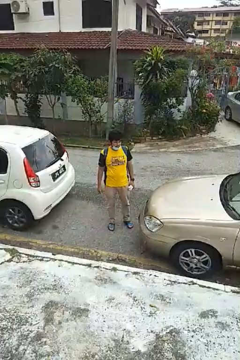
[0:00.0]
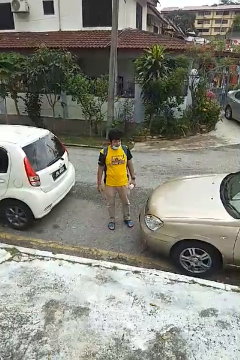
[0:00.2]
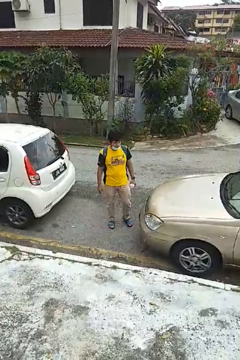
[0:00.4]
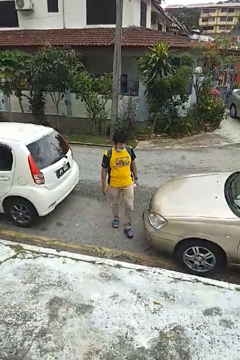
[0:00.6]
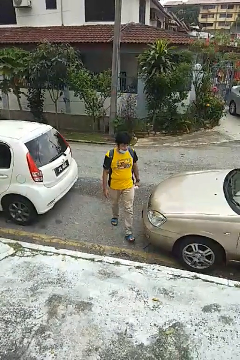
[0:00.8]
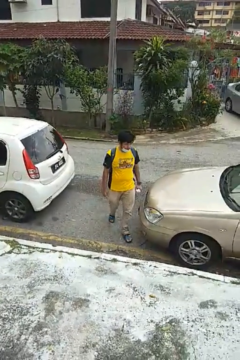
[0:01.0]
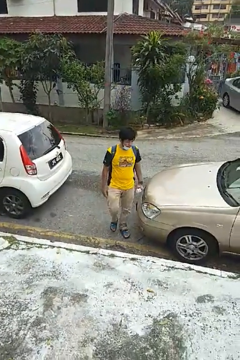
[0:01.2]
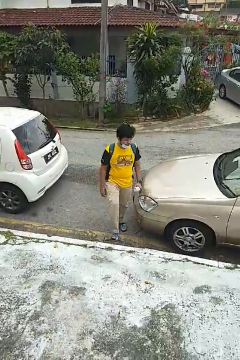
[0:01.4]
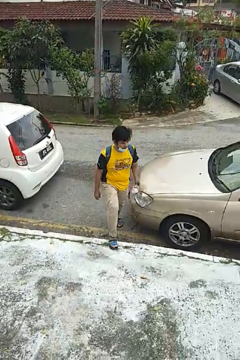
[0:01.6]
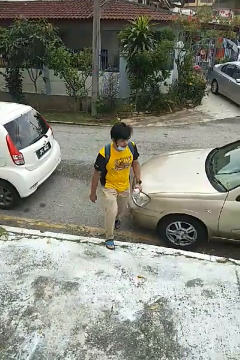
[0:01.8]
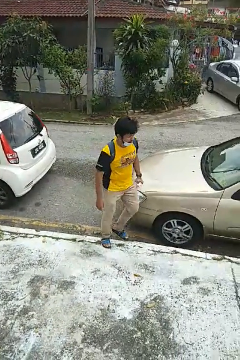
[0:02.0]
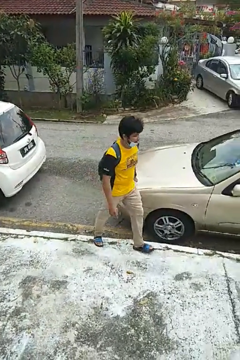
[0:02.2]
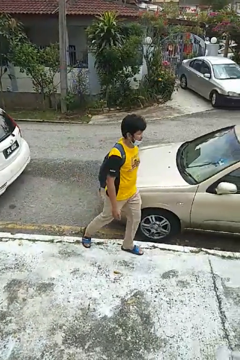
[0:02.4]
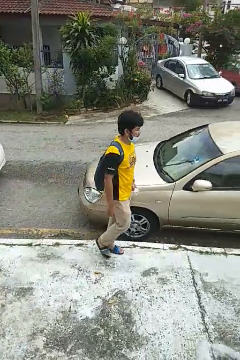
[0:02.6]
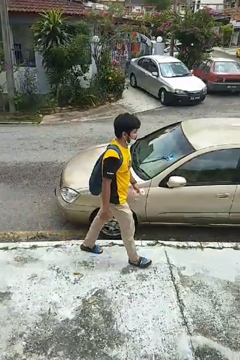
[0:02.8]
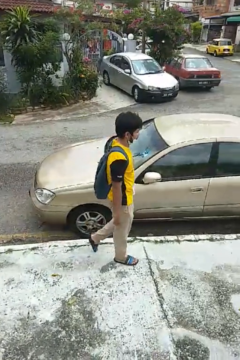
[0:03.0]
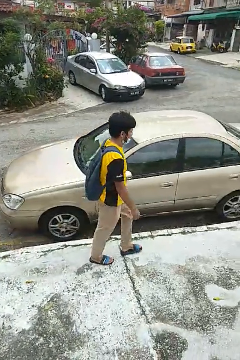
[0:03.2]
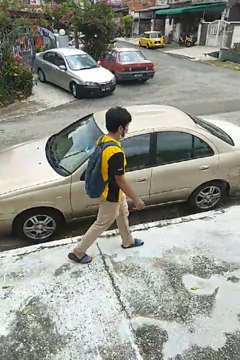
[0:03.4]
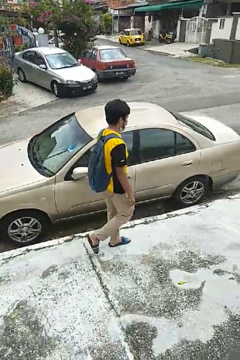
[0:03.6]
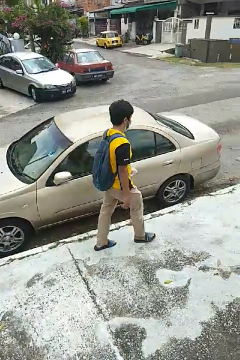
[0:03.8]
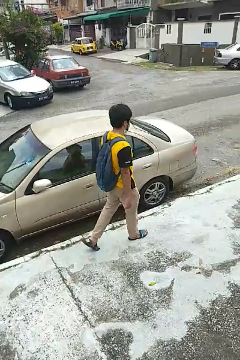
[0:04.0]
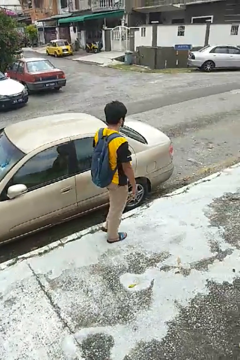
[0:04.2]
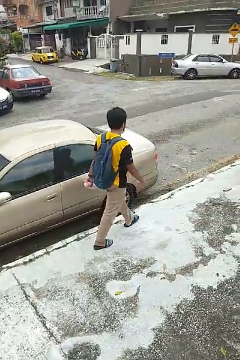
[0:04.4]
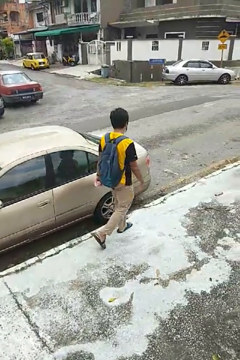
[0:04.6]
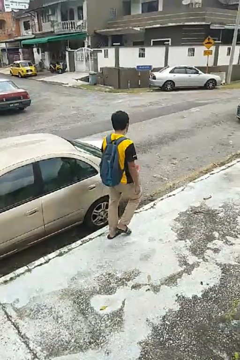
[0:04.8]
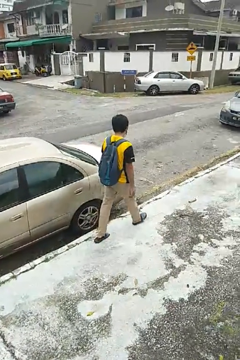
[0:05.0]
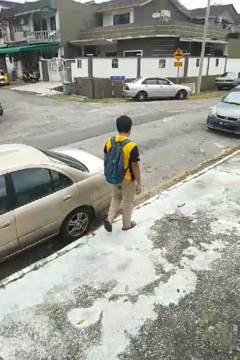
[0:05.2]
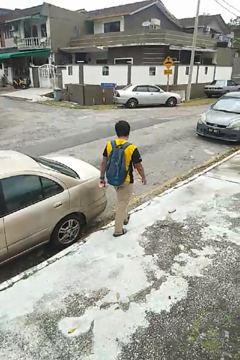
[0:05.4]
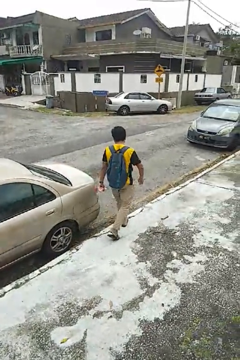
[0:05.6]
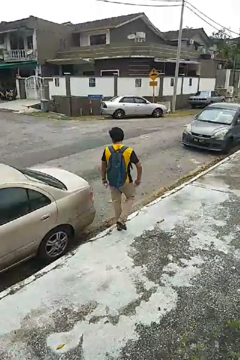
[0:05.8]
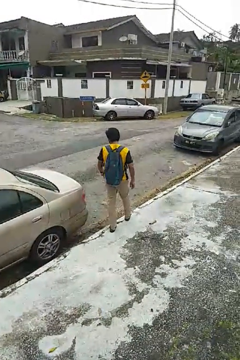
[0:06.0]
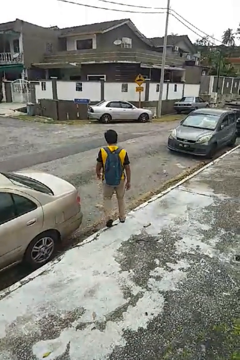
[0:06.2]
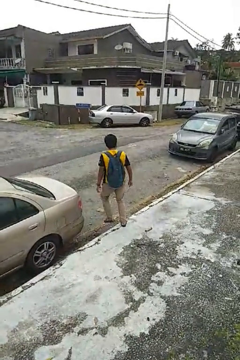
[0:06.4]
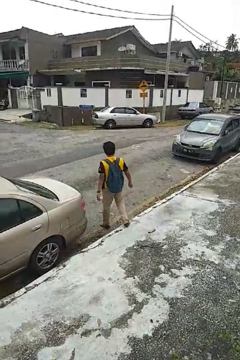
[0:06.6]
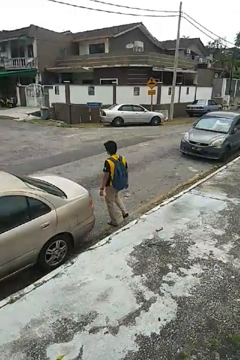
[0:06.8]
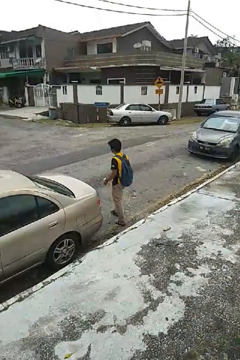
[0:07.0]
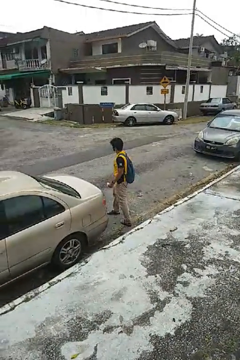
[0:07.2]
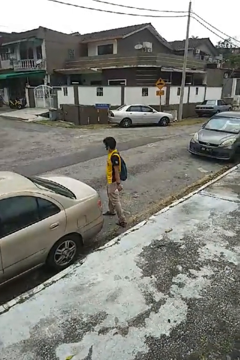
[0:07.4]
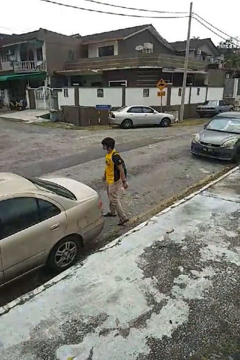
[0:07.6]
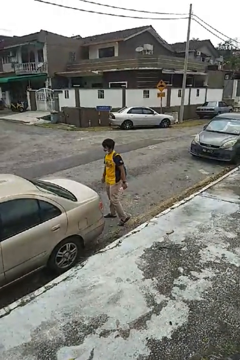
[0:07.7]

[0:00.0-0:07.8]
person walks around car

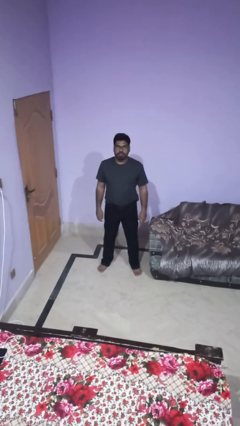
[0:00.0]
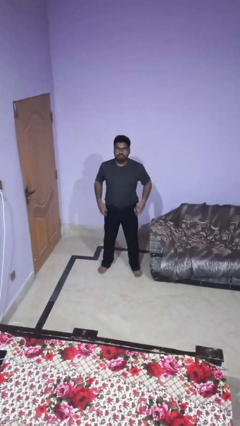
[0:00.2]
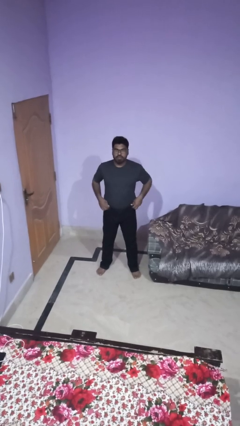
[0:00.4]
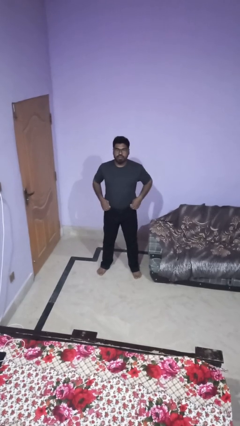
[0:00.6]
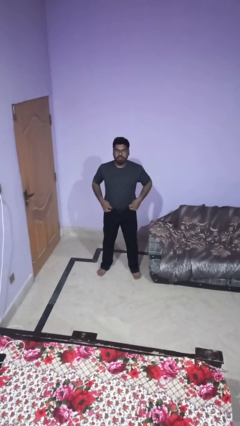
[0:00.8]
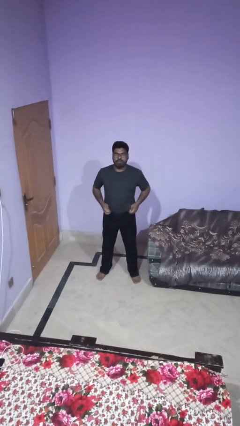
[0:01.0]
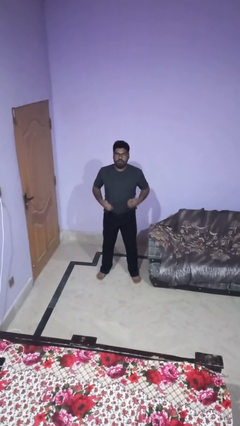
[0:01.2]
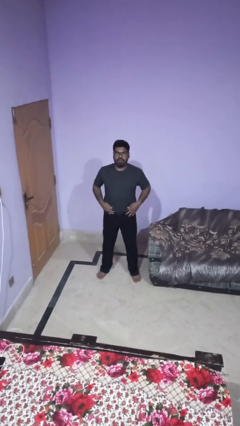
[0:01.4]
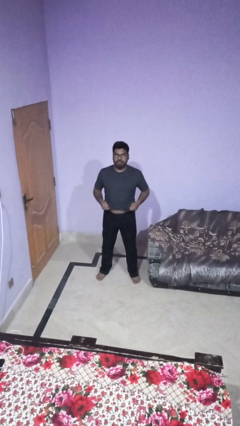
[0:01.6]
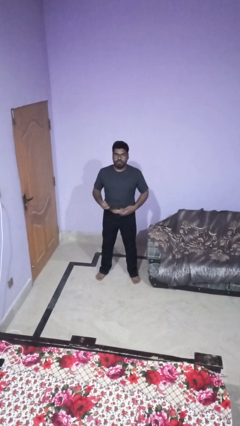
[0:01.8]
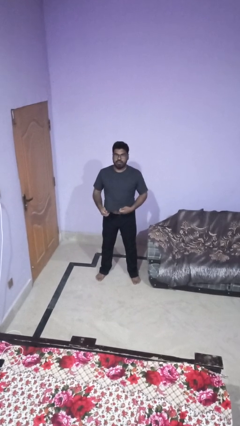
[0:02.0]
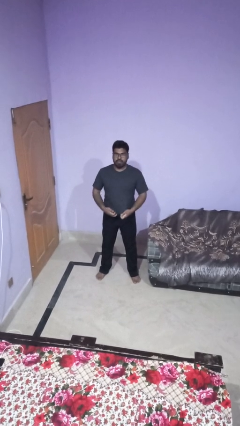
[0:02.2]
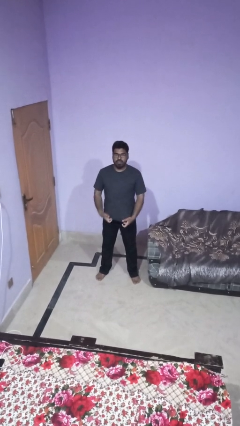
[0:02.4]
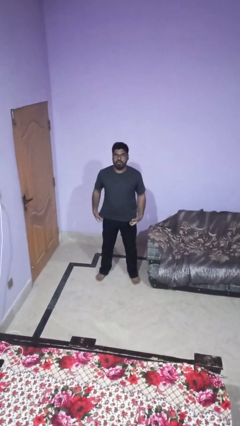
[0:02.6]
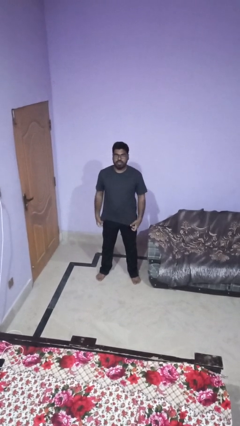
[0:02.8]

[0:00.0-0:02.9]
person untucks shirt

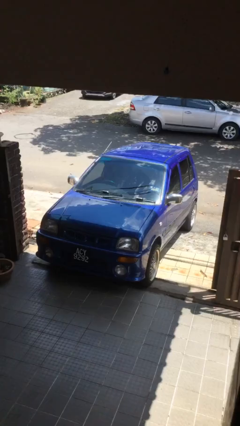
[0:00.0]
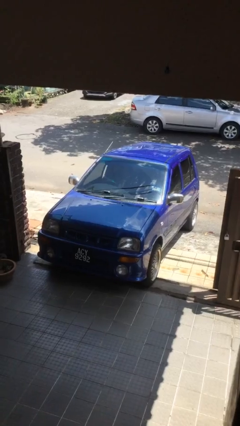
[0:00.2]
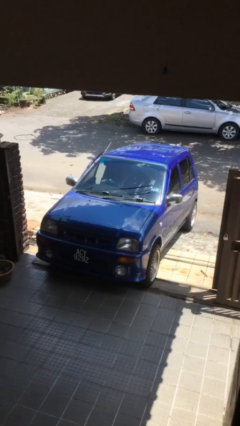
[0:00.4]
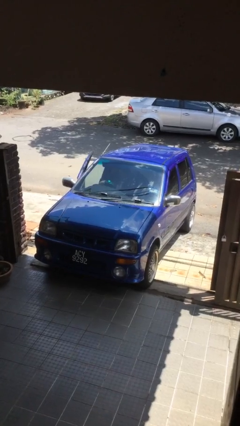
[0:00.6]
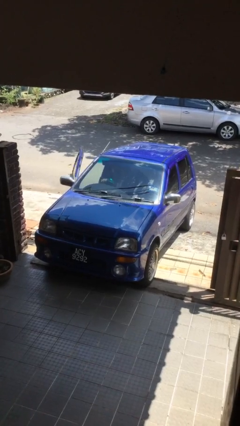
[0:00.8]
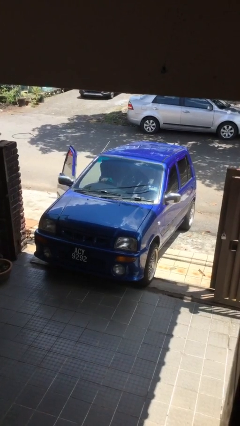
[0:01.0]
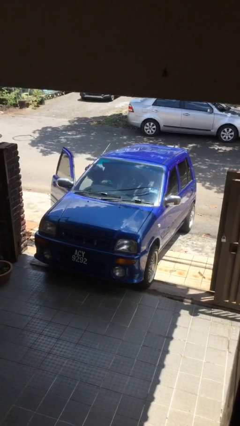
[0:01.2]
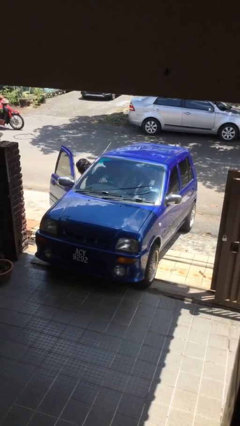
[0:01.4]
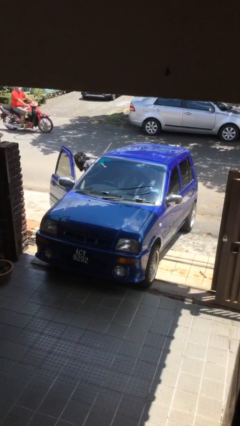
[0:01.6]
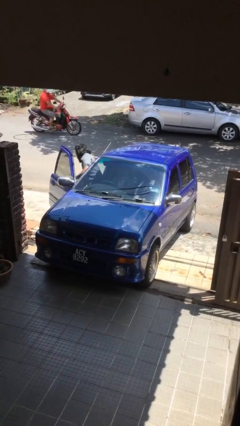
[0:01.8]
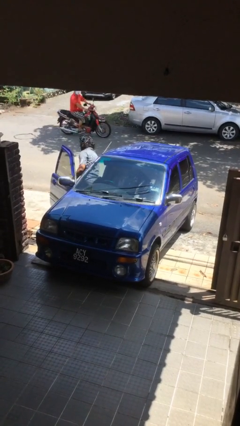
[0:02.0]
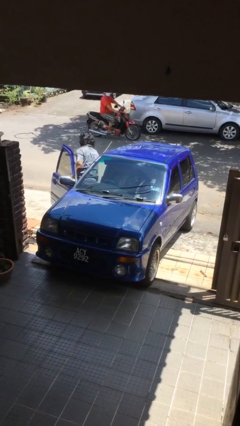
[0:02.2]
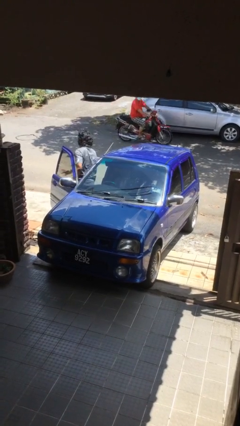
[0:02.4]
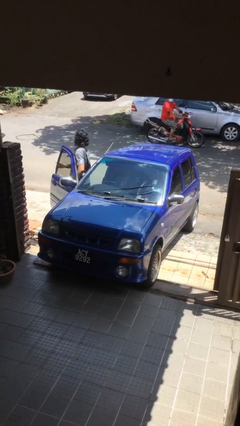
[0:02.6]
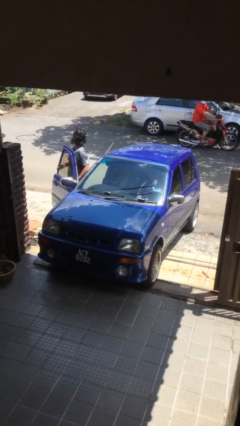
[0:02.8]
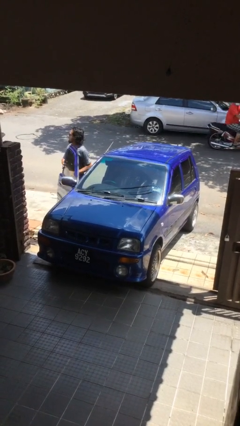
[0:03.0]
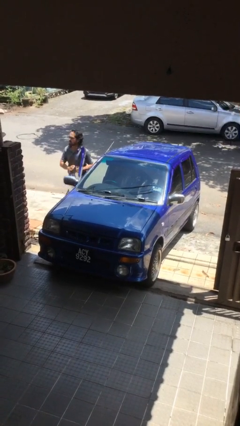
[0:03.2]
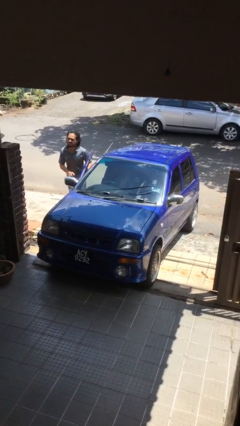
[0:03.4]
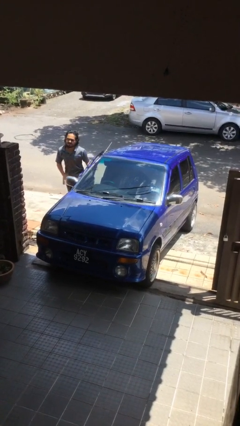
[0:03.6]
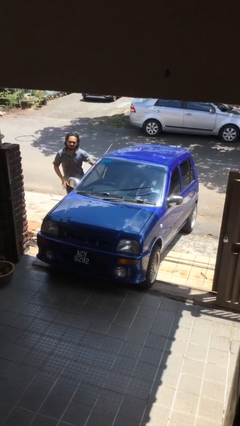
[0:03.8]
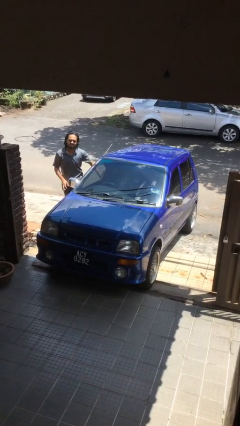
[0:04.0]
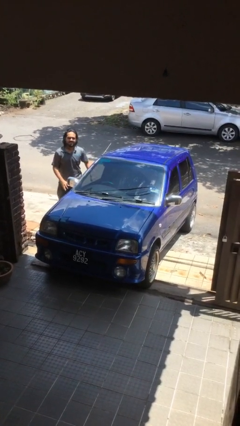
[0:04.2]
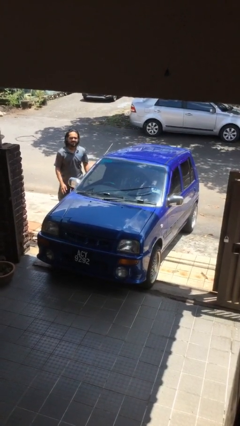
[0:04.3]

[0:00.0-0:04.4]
car drops off person

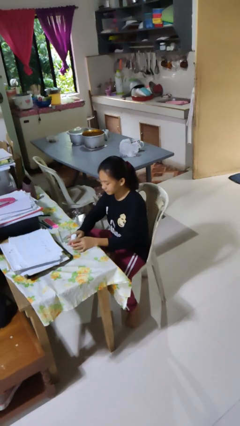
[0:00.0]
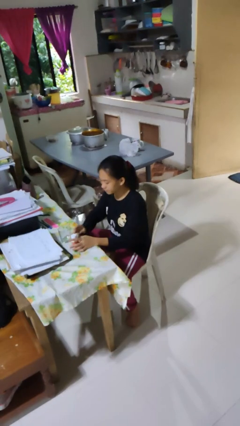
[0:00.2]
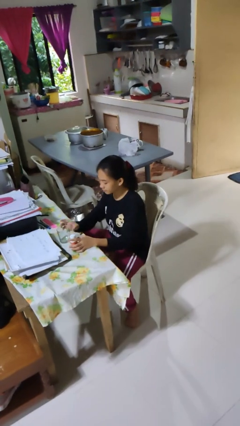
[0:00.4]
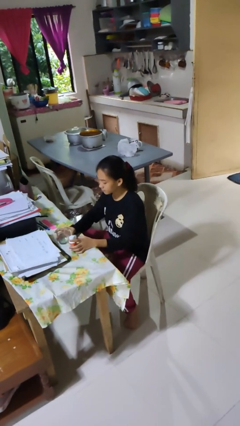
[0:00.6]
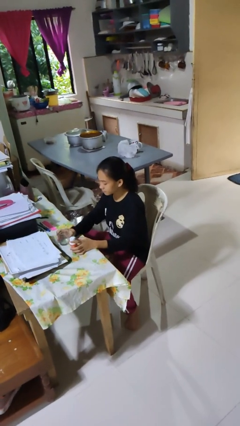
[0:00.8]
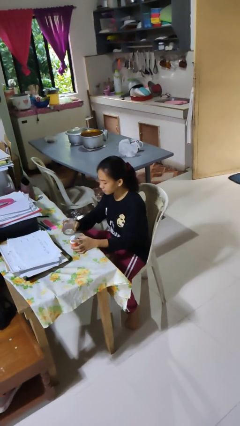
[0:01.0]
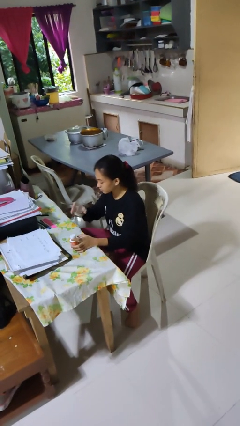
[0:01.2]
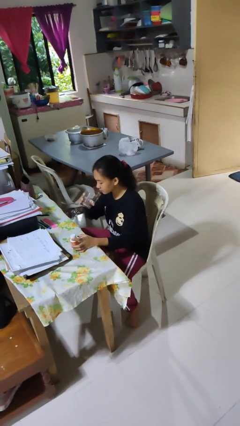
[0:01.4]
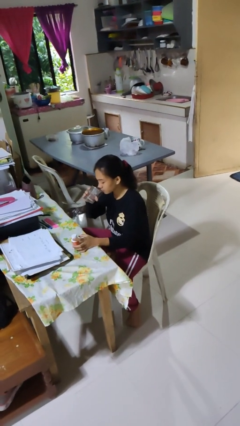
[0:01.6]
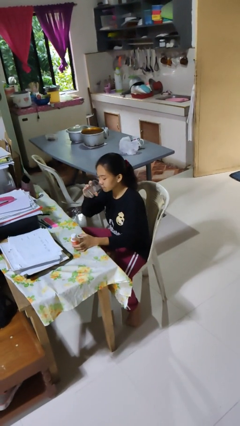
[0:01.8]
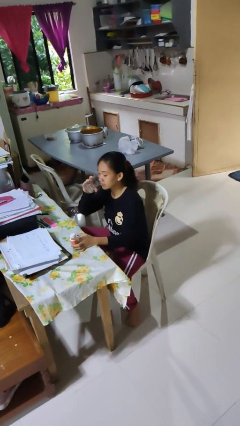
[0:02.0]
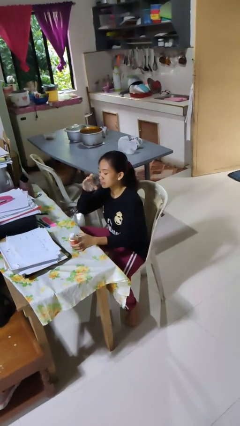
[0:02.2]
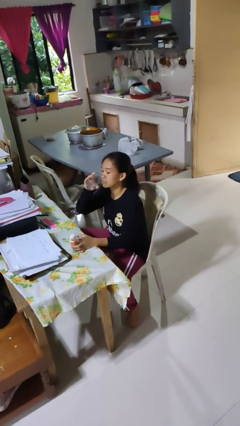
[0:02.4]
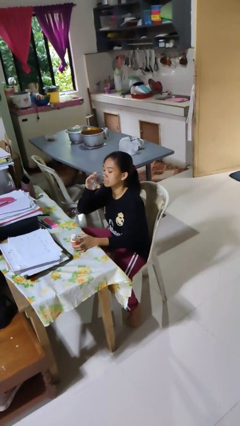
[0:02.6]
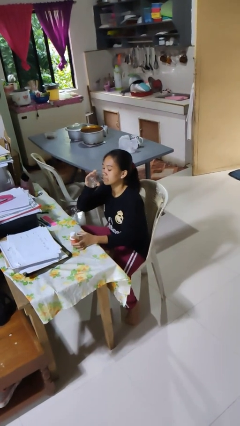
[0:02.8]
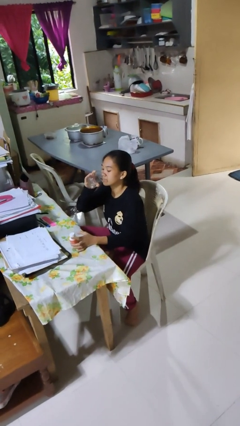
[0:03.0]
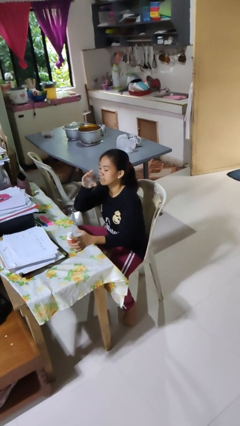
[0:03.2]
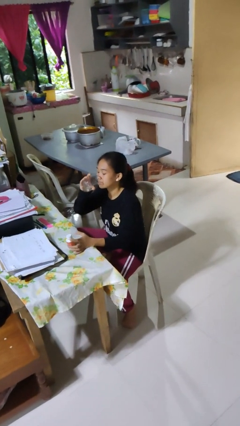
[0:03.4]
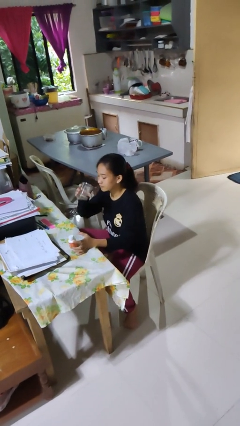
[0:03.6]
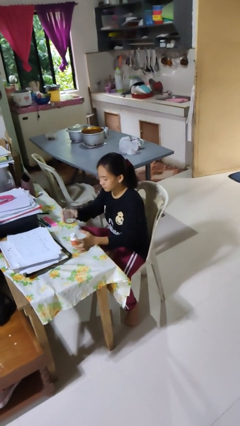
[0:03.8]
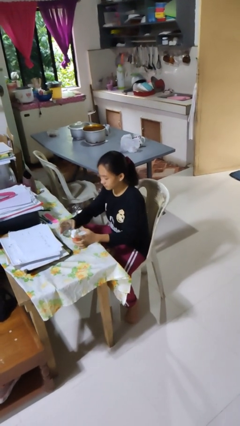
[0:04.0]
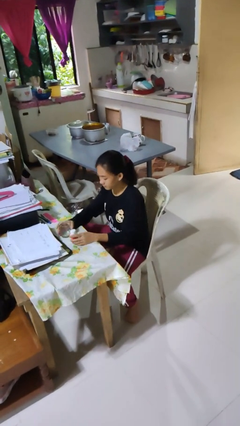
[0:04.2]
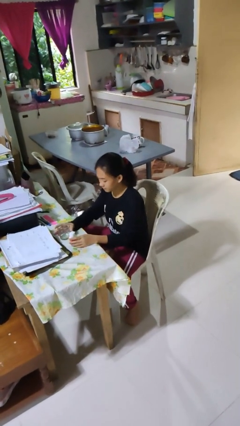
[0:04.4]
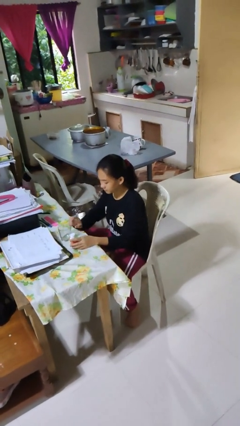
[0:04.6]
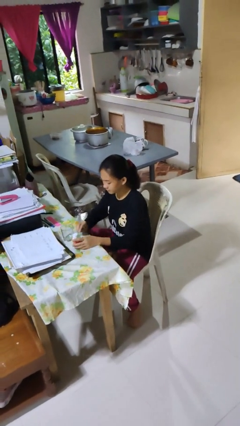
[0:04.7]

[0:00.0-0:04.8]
person drinks from cup
